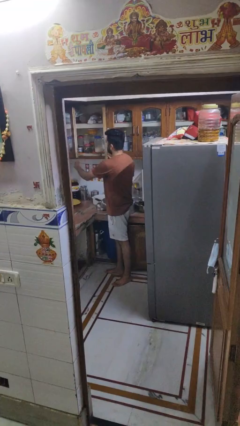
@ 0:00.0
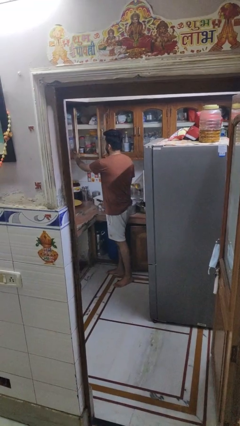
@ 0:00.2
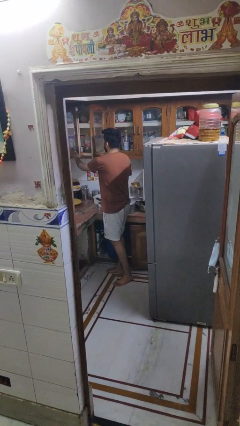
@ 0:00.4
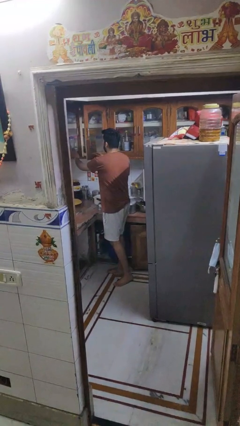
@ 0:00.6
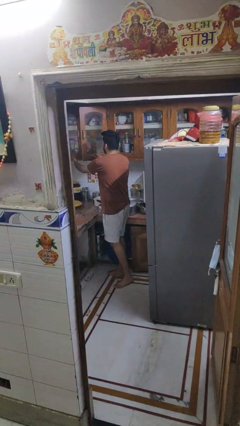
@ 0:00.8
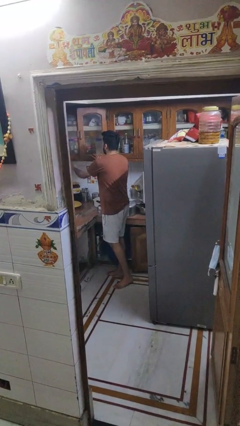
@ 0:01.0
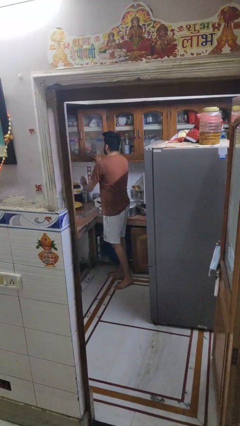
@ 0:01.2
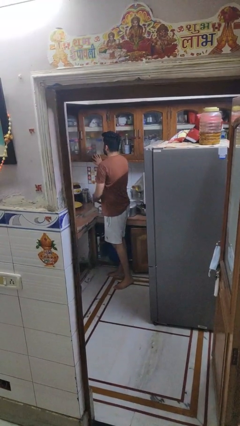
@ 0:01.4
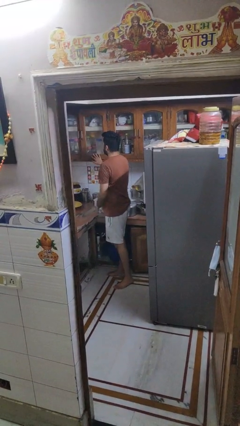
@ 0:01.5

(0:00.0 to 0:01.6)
person closes cabinet

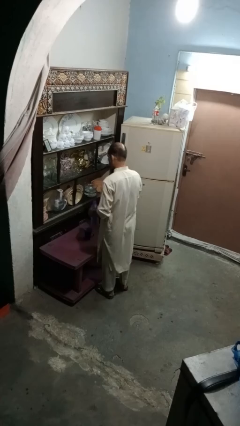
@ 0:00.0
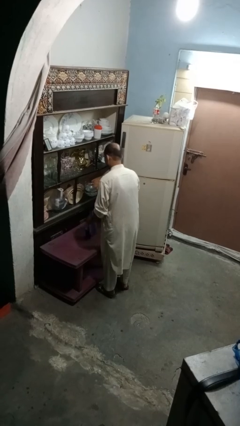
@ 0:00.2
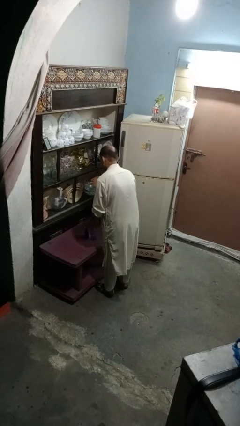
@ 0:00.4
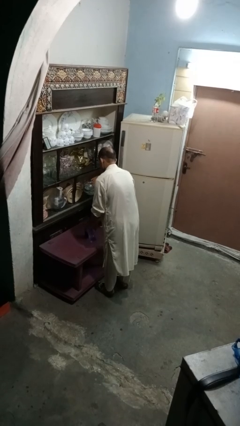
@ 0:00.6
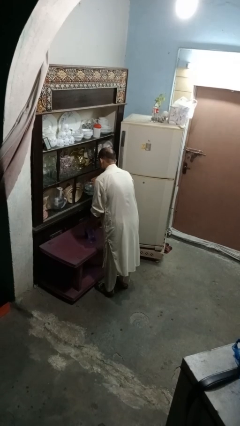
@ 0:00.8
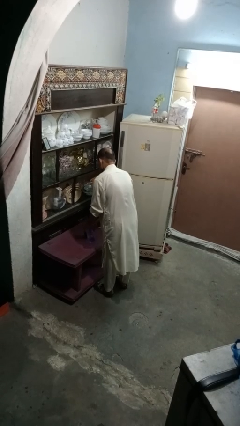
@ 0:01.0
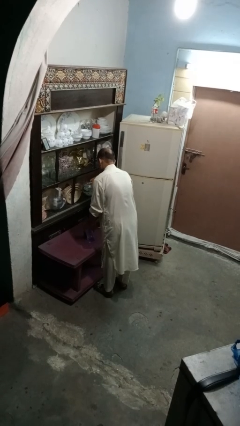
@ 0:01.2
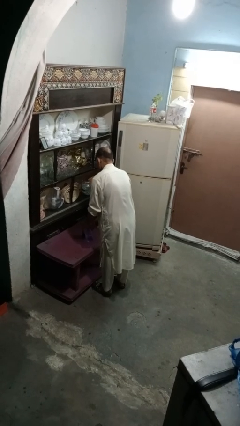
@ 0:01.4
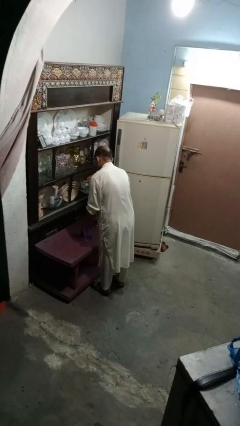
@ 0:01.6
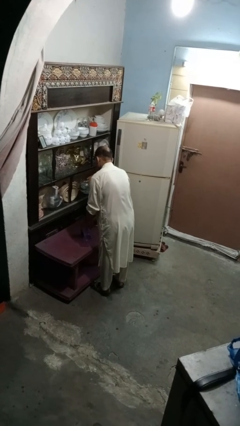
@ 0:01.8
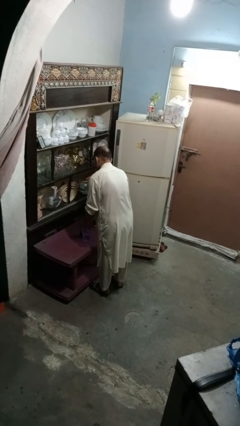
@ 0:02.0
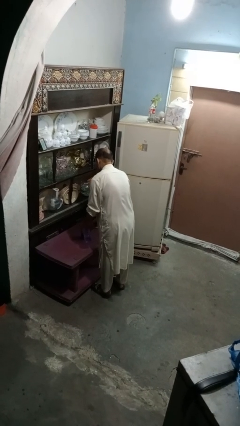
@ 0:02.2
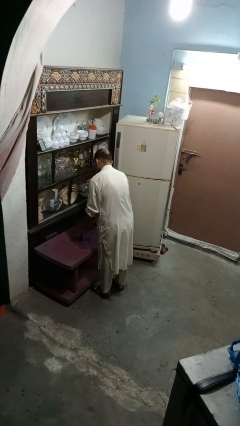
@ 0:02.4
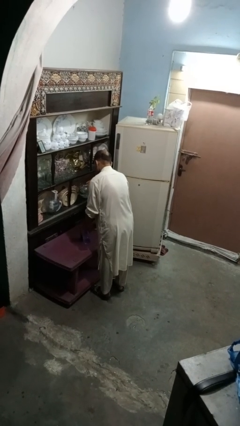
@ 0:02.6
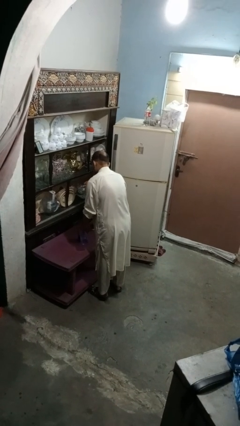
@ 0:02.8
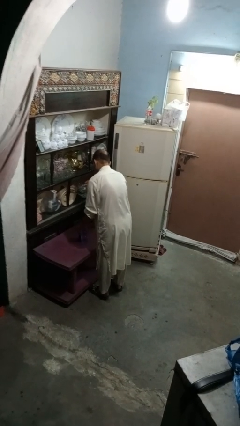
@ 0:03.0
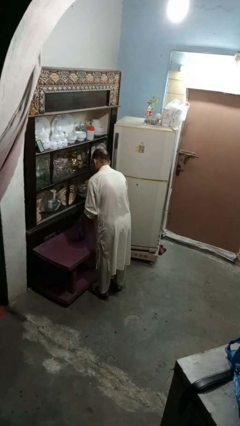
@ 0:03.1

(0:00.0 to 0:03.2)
person pours liquid into cup

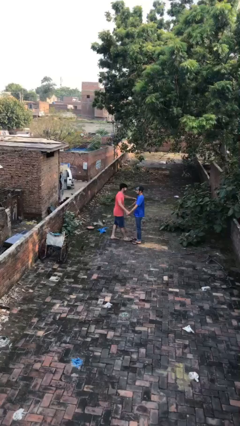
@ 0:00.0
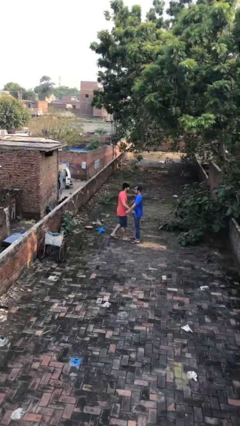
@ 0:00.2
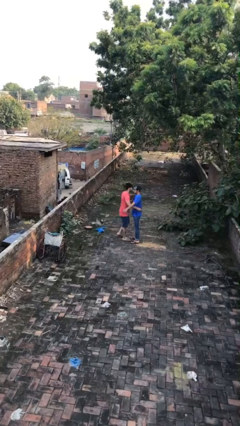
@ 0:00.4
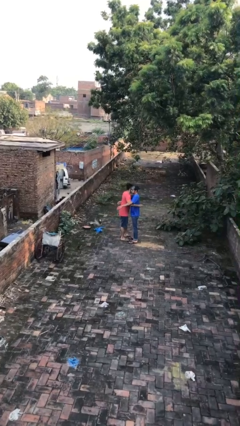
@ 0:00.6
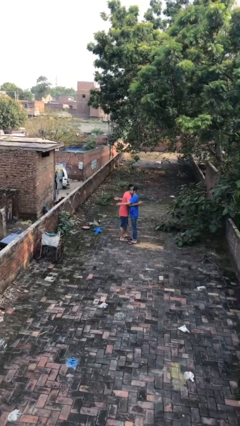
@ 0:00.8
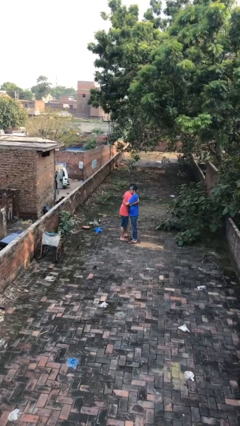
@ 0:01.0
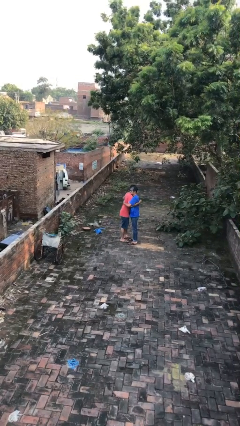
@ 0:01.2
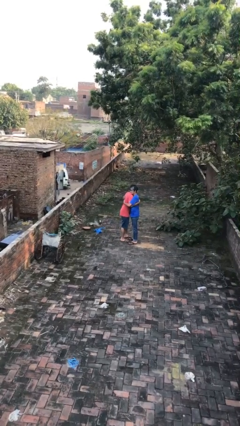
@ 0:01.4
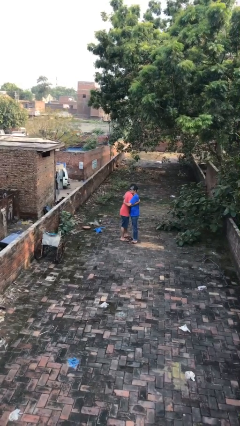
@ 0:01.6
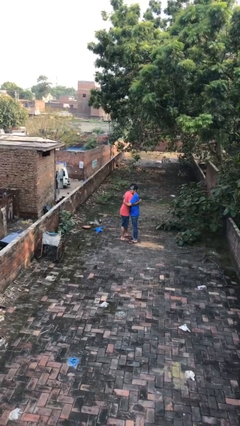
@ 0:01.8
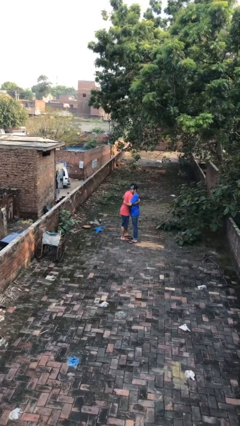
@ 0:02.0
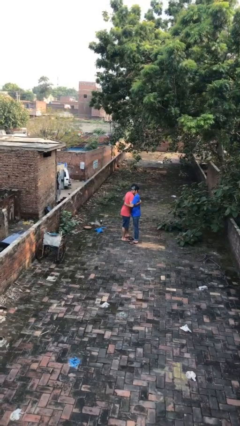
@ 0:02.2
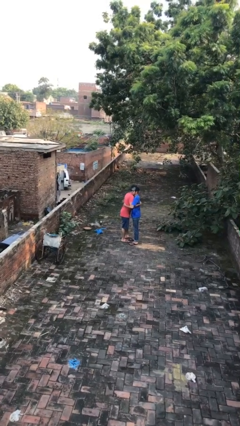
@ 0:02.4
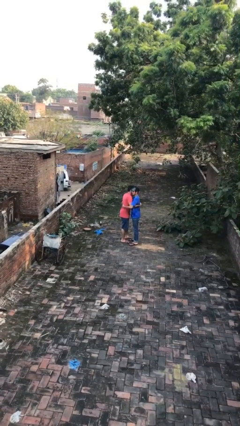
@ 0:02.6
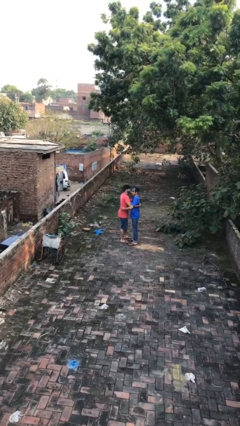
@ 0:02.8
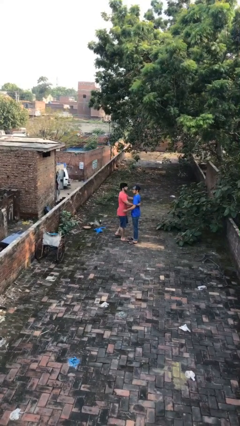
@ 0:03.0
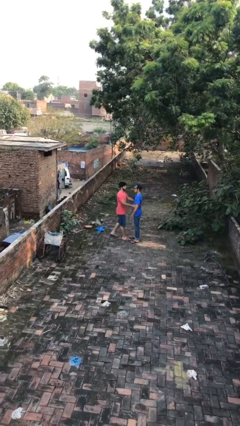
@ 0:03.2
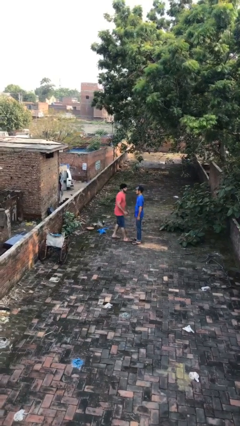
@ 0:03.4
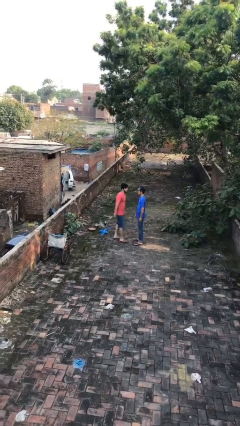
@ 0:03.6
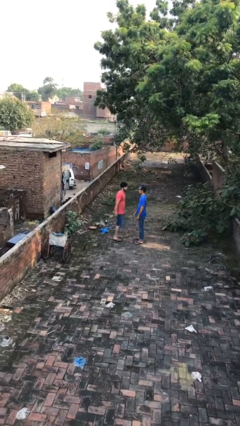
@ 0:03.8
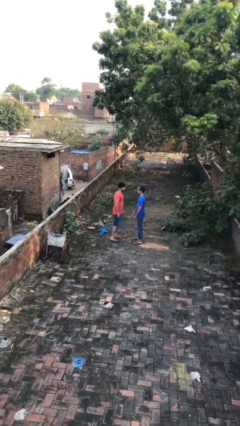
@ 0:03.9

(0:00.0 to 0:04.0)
person embraces person

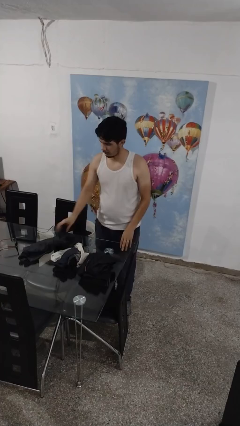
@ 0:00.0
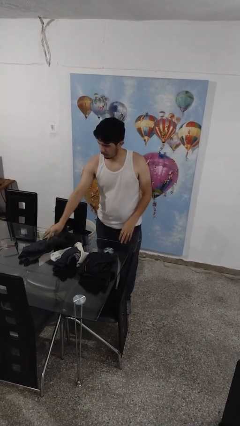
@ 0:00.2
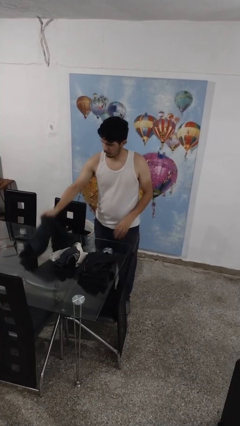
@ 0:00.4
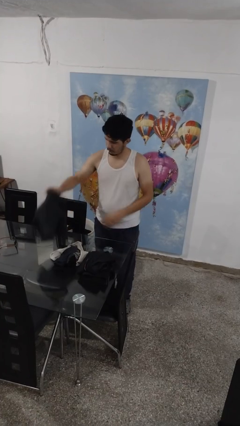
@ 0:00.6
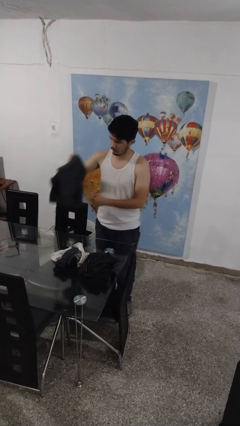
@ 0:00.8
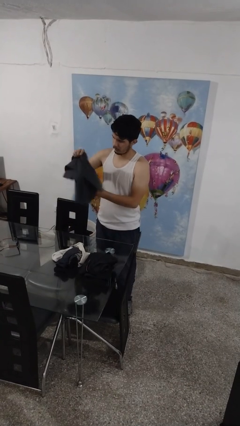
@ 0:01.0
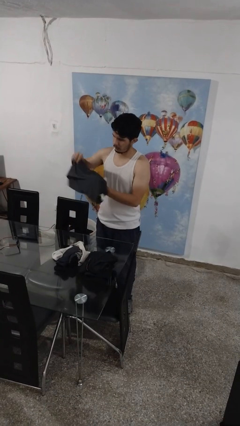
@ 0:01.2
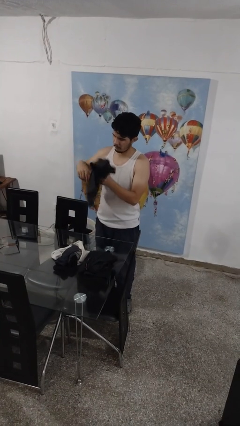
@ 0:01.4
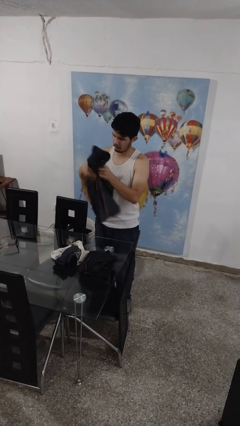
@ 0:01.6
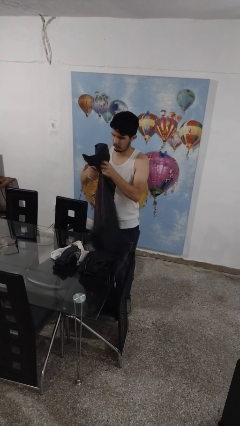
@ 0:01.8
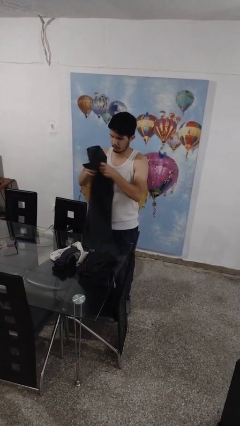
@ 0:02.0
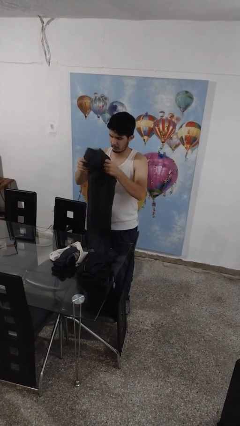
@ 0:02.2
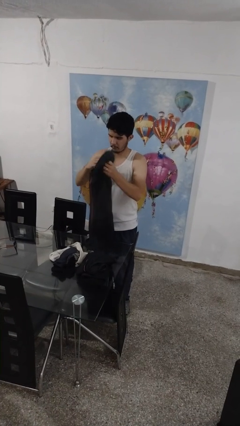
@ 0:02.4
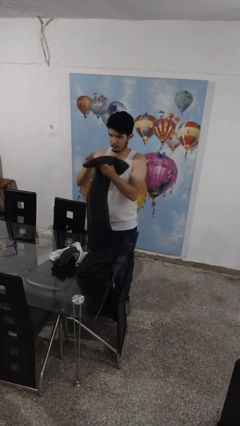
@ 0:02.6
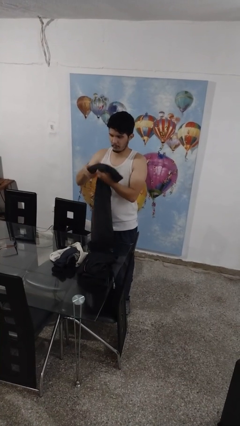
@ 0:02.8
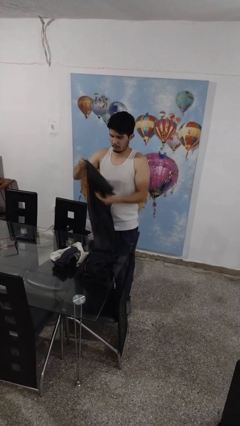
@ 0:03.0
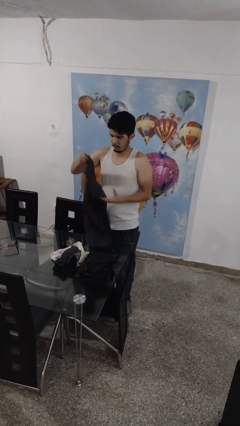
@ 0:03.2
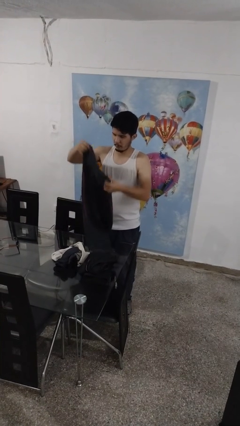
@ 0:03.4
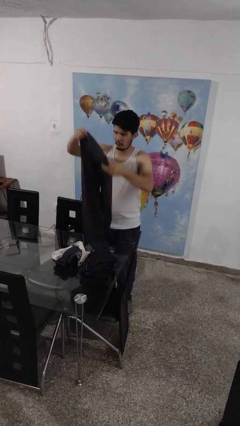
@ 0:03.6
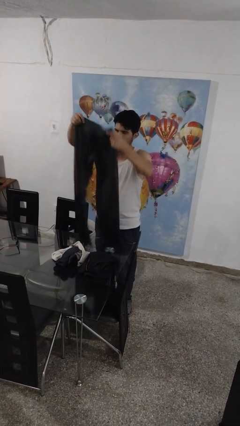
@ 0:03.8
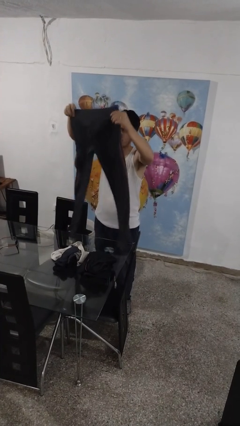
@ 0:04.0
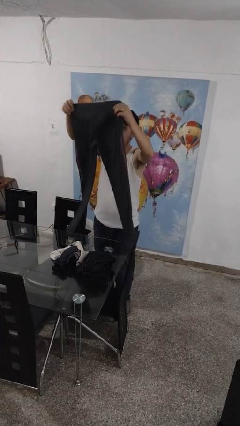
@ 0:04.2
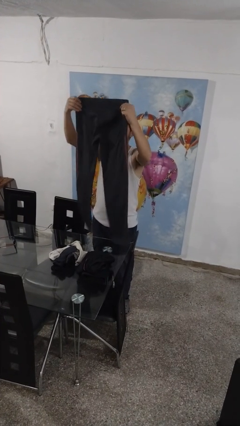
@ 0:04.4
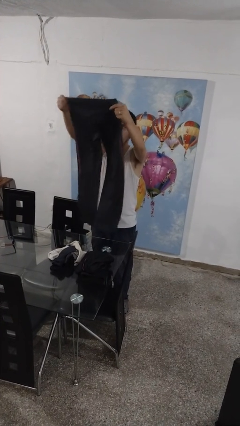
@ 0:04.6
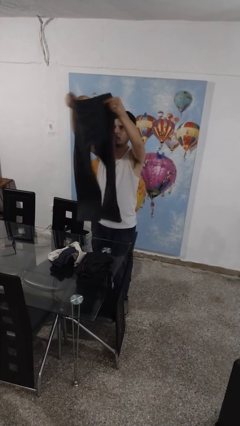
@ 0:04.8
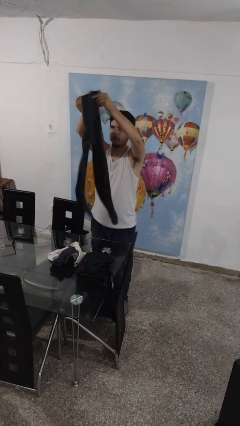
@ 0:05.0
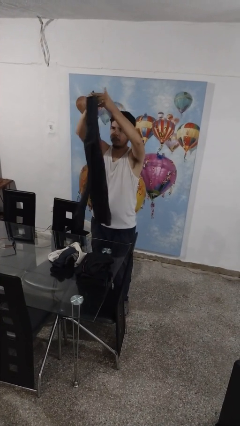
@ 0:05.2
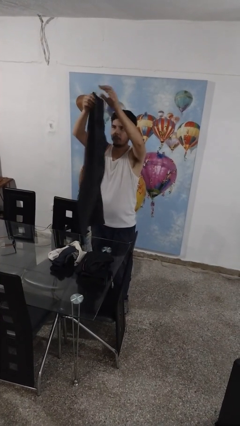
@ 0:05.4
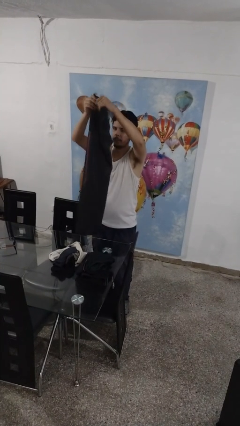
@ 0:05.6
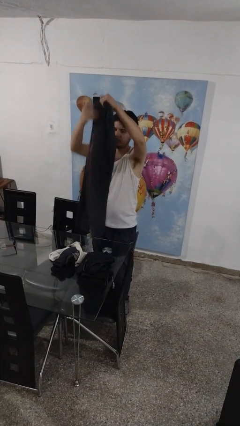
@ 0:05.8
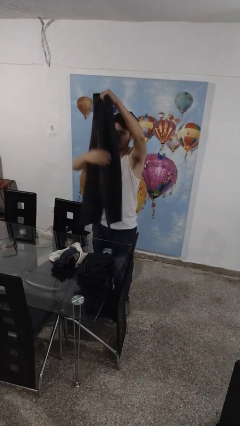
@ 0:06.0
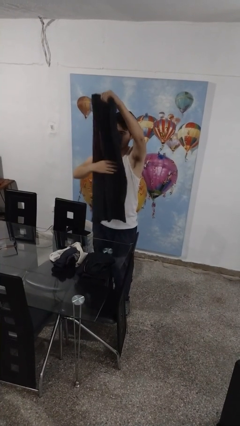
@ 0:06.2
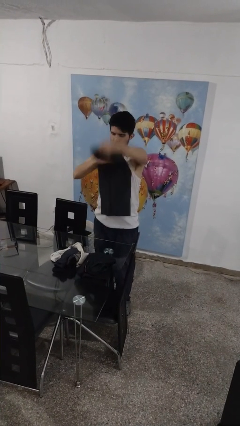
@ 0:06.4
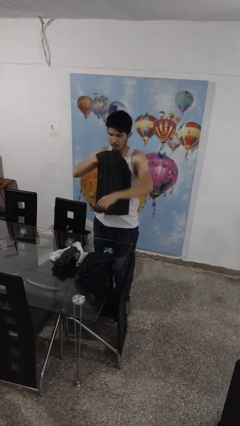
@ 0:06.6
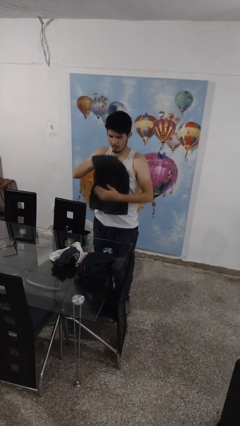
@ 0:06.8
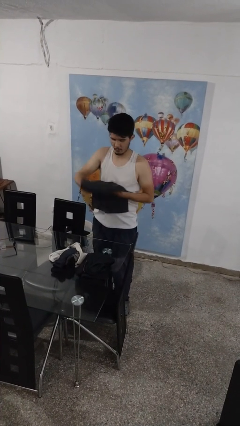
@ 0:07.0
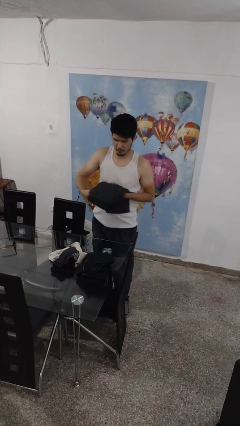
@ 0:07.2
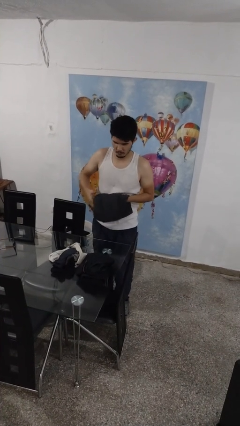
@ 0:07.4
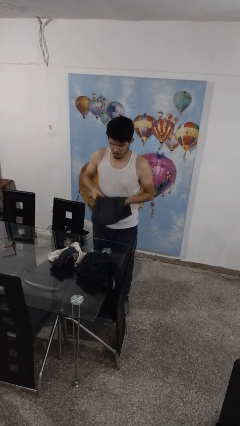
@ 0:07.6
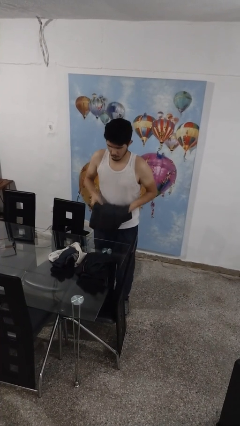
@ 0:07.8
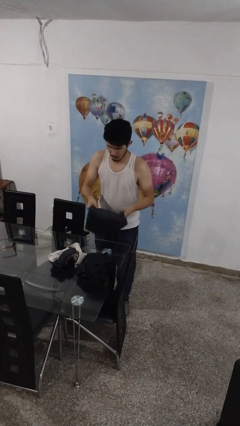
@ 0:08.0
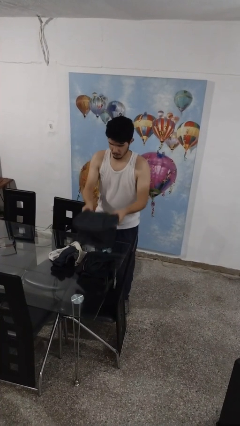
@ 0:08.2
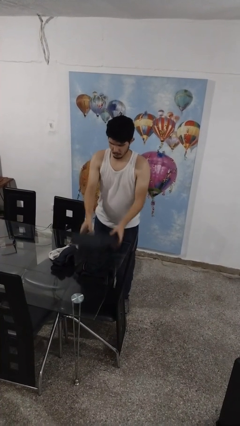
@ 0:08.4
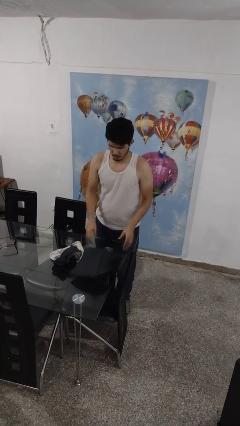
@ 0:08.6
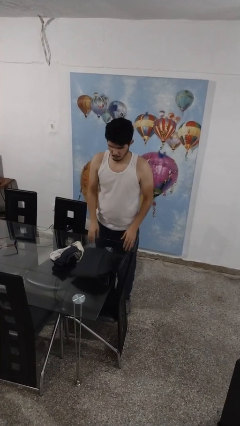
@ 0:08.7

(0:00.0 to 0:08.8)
person folds pants

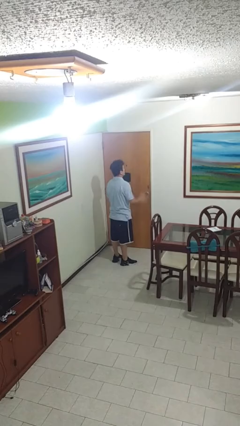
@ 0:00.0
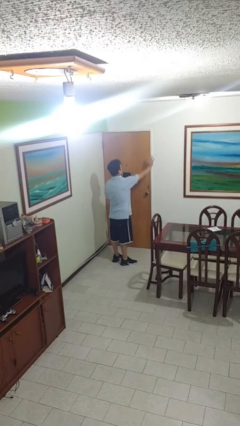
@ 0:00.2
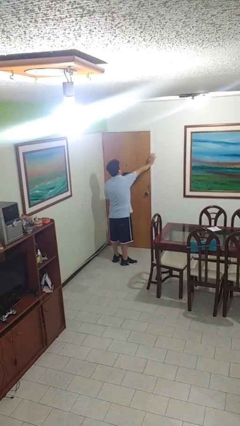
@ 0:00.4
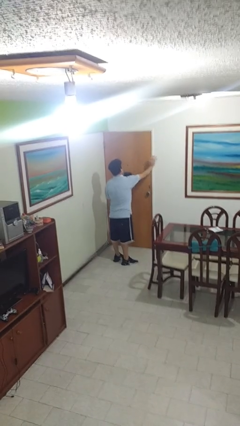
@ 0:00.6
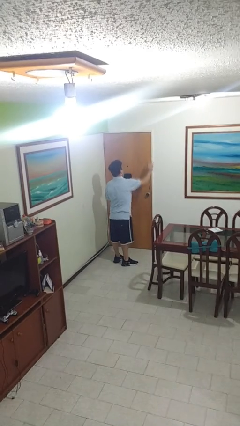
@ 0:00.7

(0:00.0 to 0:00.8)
person gestures stop
